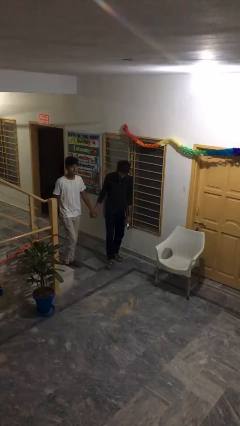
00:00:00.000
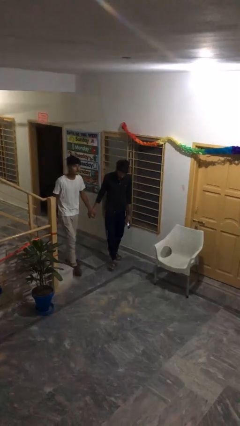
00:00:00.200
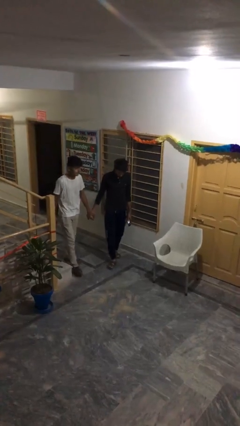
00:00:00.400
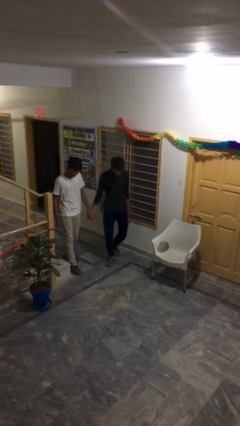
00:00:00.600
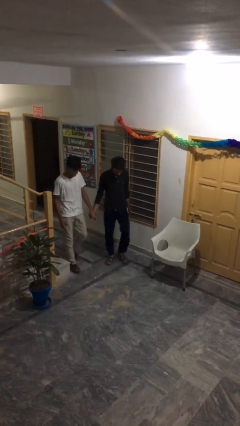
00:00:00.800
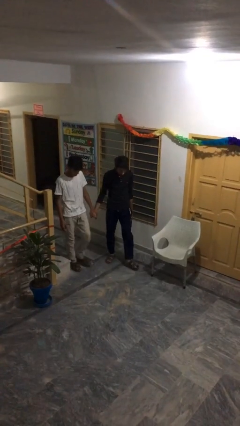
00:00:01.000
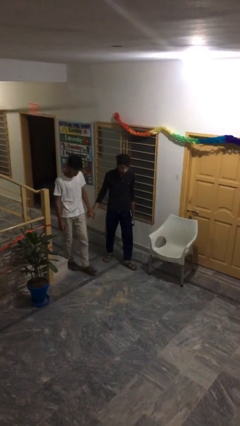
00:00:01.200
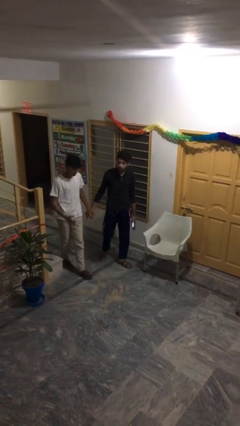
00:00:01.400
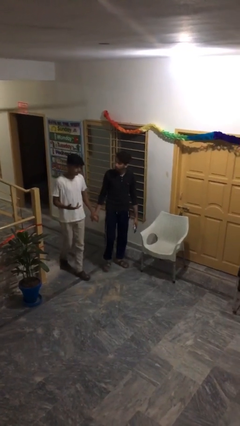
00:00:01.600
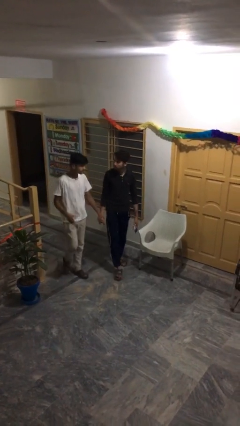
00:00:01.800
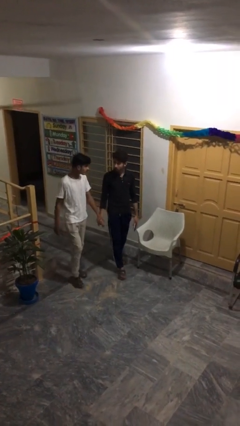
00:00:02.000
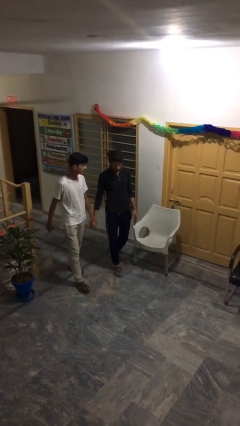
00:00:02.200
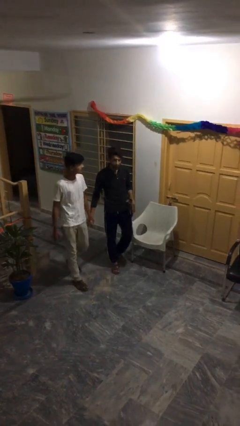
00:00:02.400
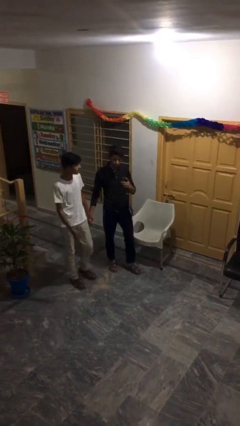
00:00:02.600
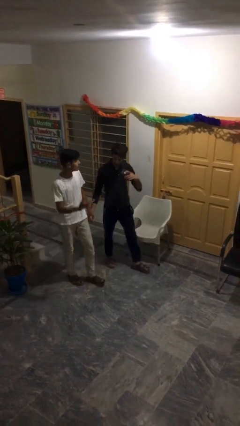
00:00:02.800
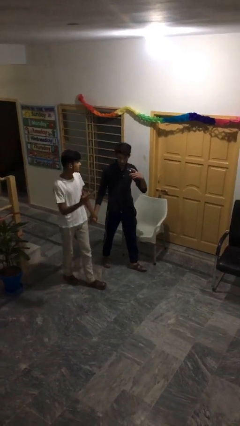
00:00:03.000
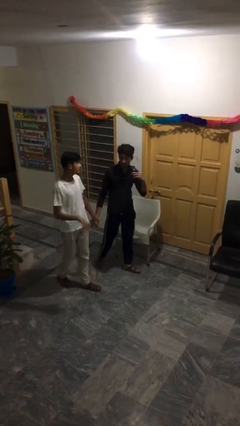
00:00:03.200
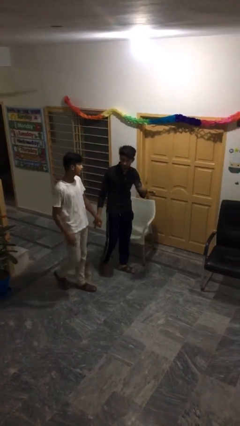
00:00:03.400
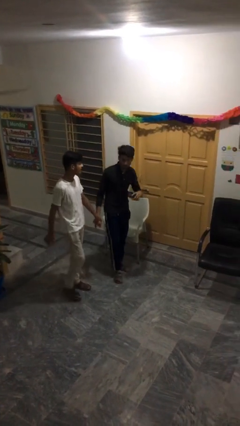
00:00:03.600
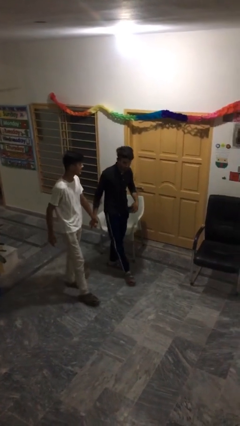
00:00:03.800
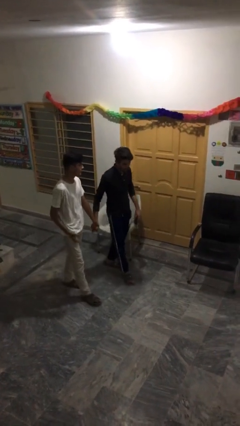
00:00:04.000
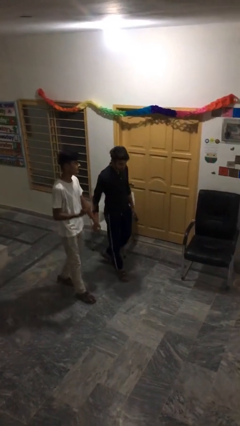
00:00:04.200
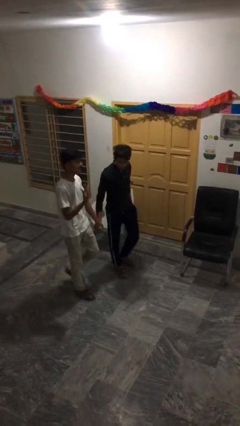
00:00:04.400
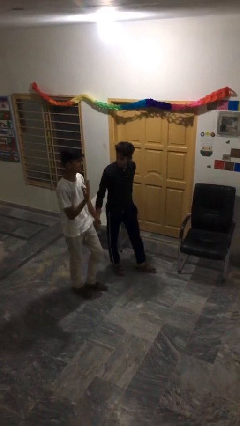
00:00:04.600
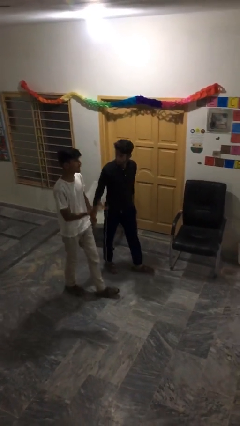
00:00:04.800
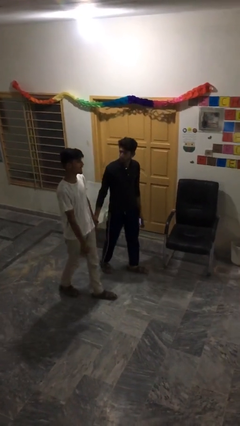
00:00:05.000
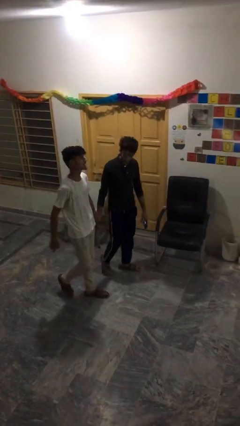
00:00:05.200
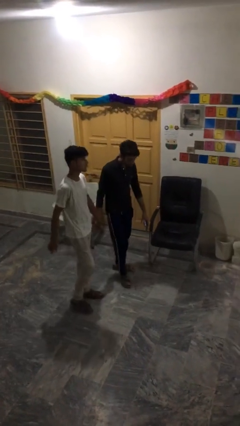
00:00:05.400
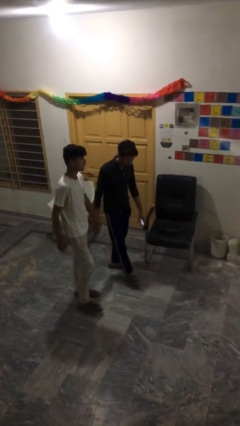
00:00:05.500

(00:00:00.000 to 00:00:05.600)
person holds hand

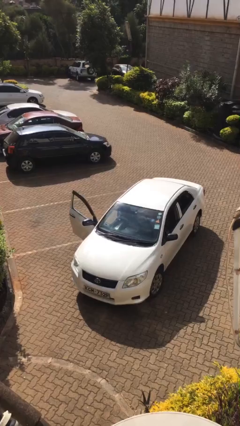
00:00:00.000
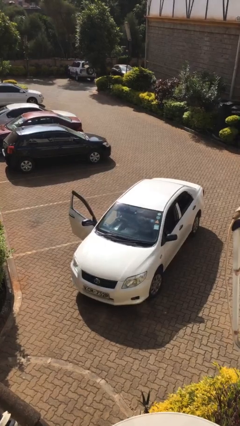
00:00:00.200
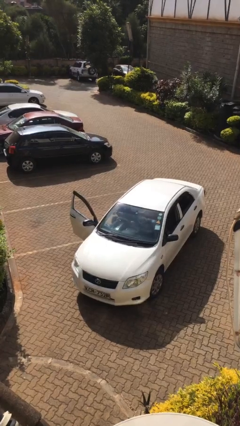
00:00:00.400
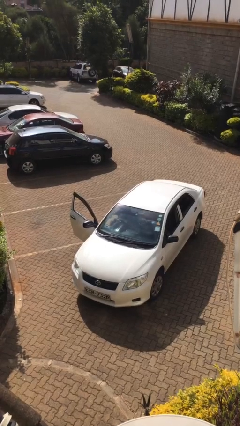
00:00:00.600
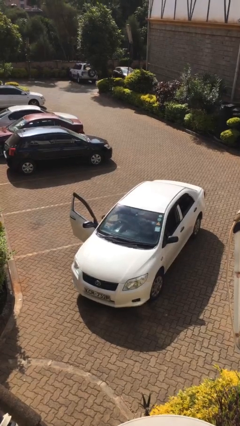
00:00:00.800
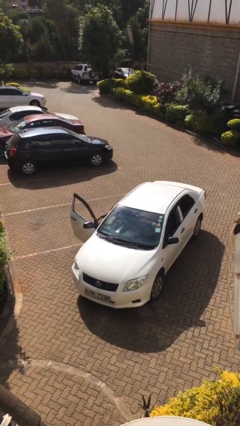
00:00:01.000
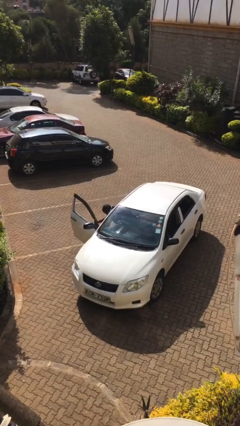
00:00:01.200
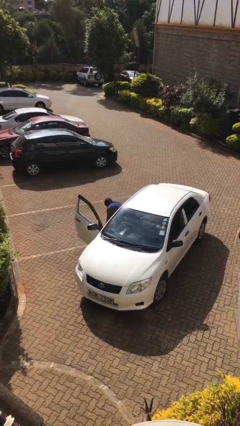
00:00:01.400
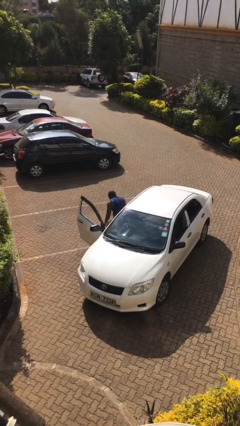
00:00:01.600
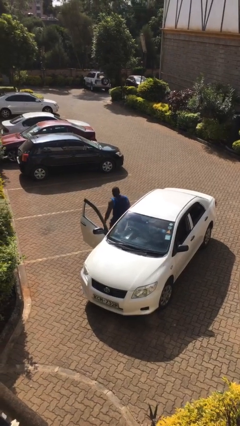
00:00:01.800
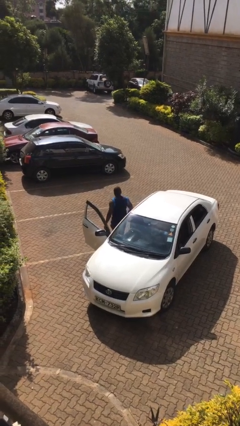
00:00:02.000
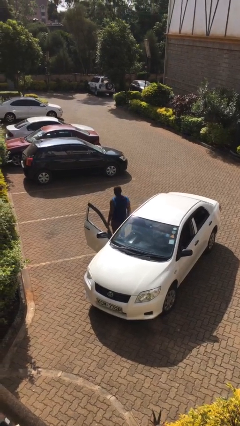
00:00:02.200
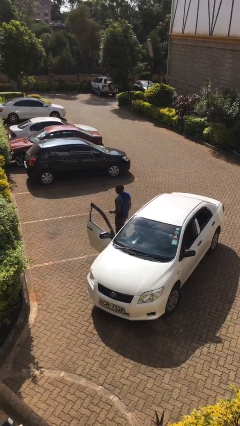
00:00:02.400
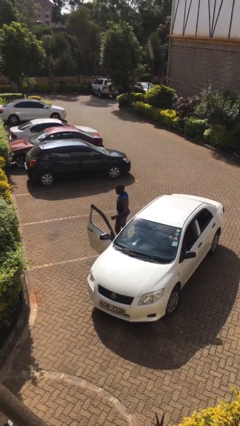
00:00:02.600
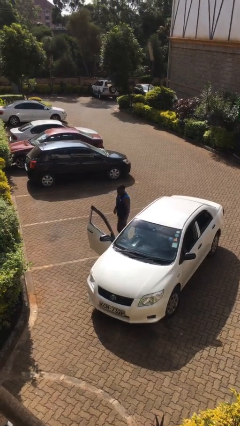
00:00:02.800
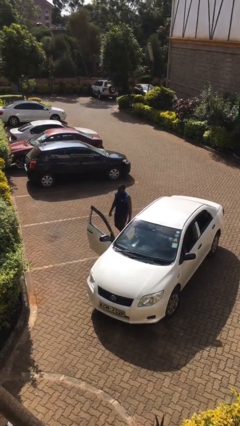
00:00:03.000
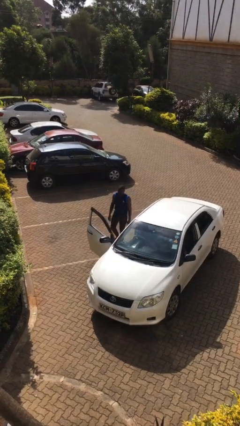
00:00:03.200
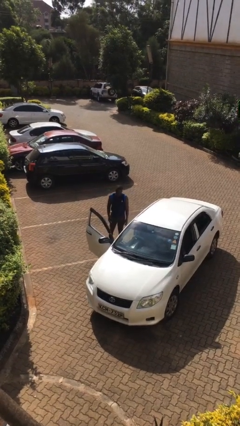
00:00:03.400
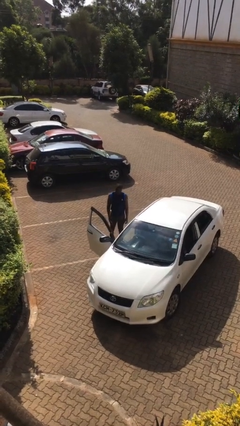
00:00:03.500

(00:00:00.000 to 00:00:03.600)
person exits car

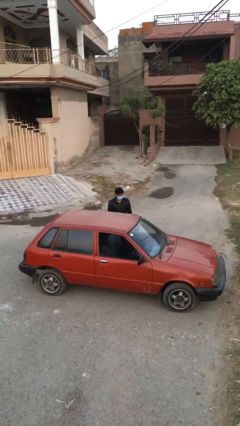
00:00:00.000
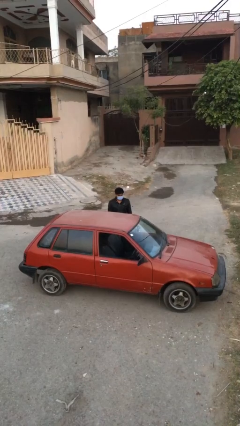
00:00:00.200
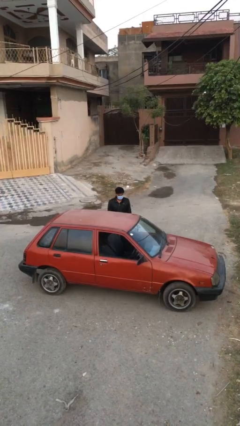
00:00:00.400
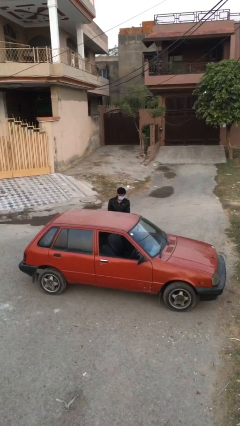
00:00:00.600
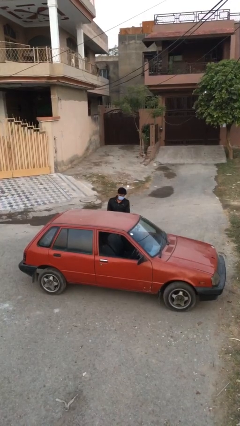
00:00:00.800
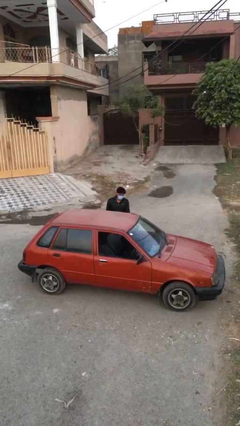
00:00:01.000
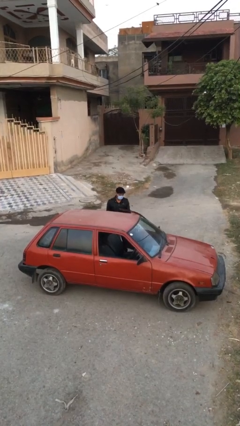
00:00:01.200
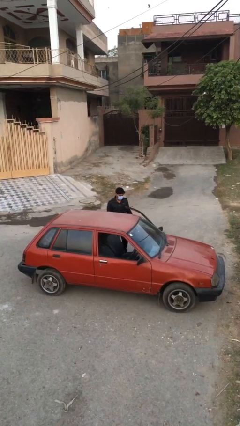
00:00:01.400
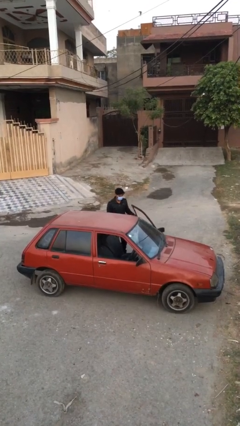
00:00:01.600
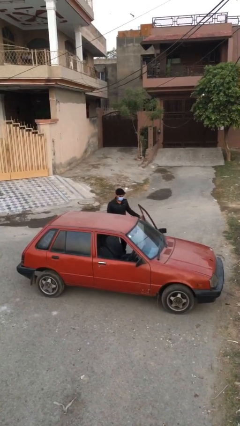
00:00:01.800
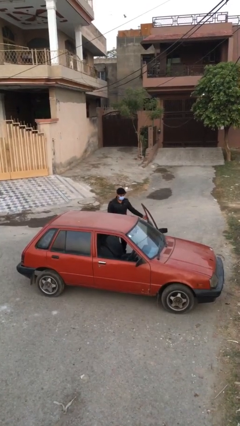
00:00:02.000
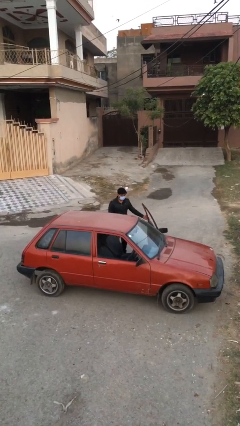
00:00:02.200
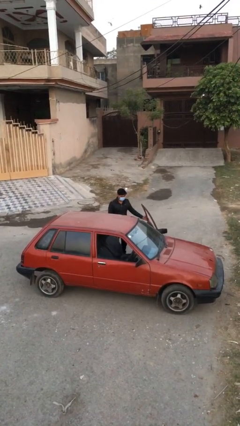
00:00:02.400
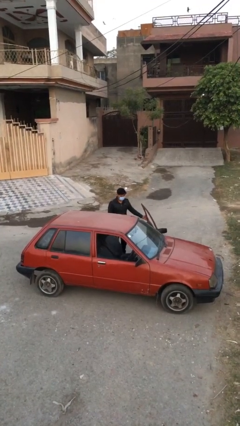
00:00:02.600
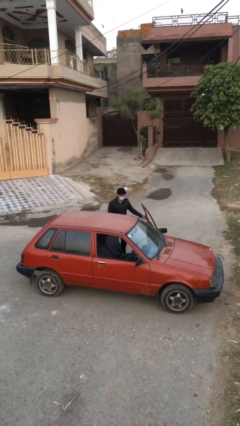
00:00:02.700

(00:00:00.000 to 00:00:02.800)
person opens car door

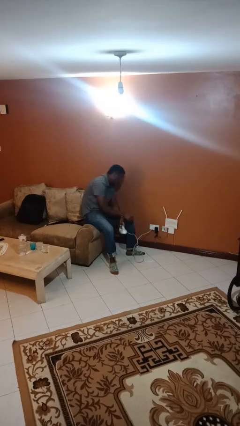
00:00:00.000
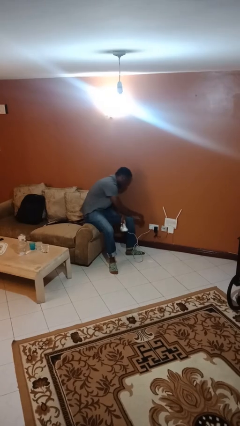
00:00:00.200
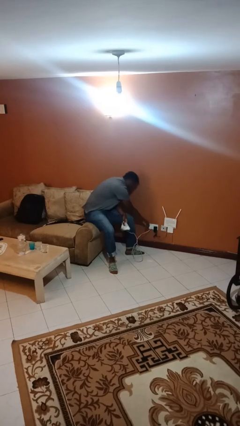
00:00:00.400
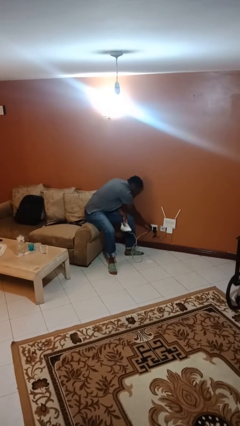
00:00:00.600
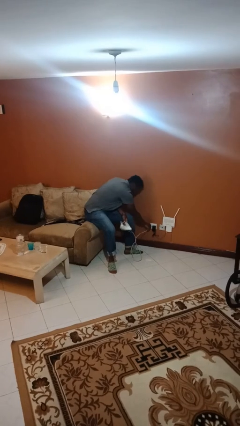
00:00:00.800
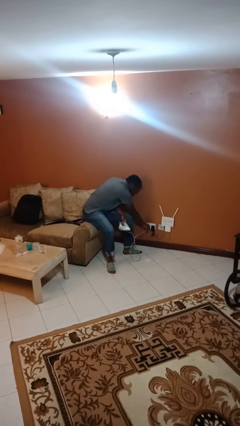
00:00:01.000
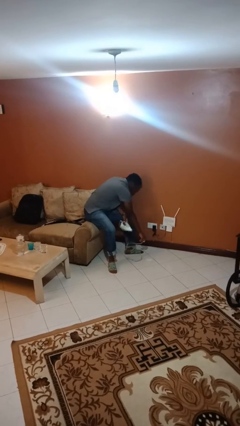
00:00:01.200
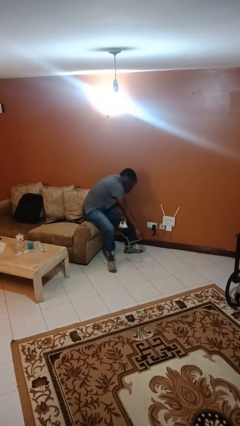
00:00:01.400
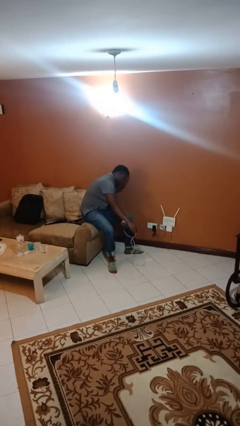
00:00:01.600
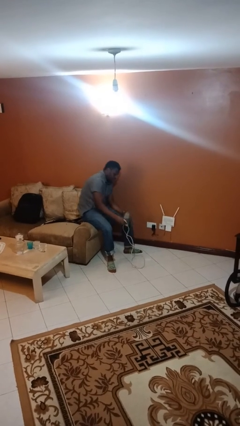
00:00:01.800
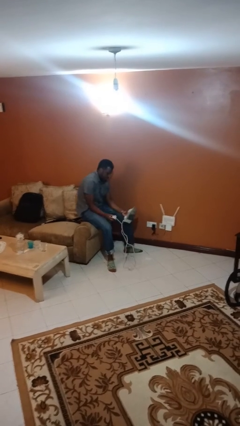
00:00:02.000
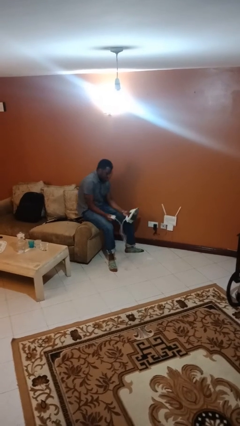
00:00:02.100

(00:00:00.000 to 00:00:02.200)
person unplugs from electrical socket

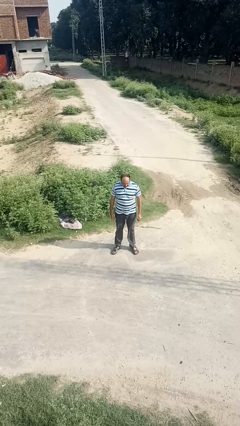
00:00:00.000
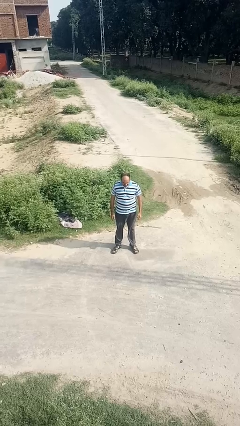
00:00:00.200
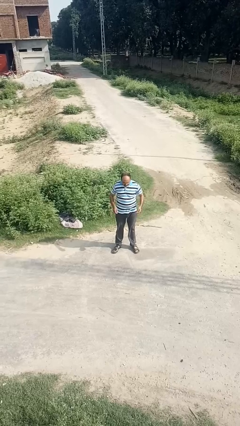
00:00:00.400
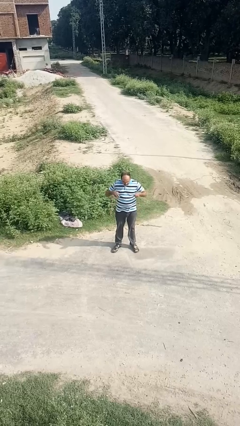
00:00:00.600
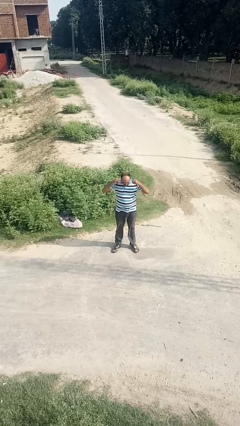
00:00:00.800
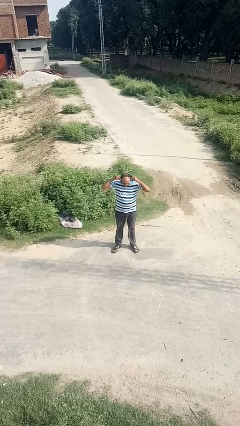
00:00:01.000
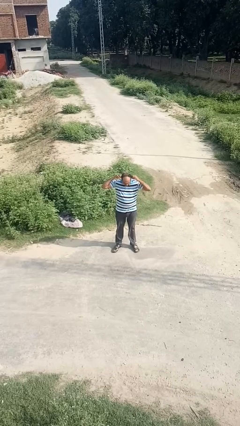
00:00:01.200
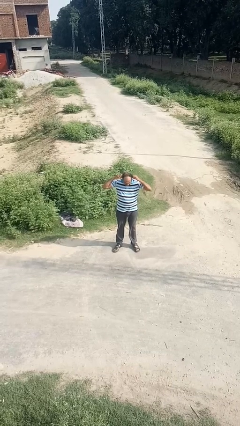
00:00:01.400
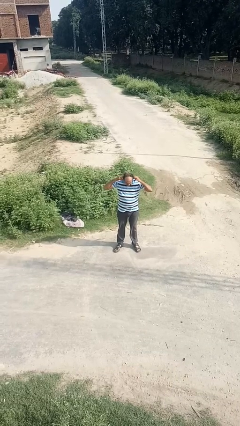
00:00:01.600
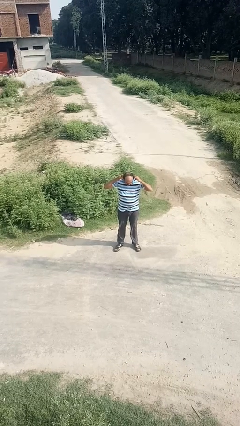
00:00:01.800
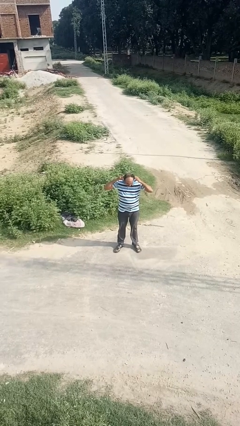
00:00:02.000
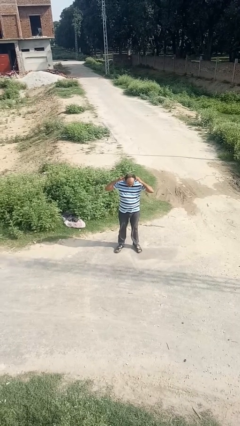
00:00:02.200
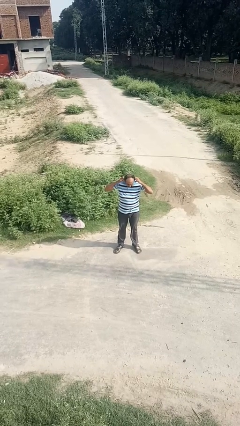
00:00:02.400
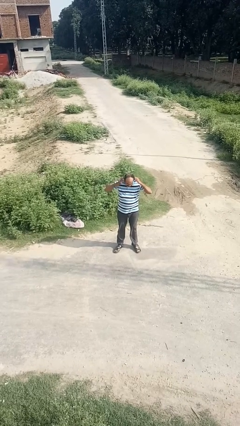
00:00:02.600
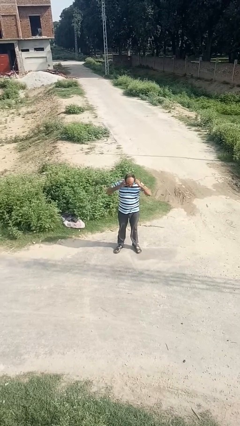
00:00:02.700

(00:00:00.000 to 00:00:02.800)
person puts on earrings

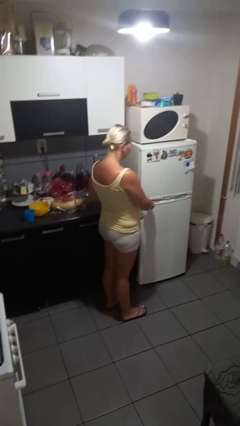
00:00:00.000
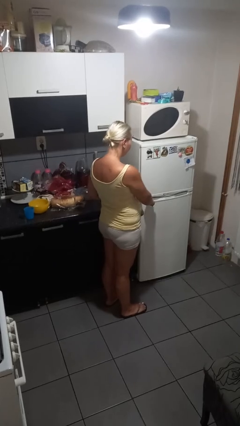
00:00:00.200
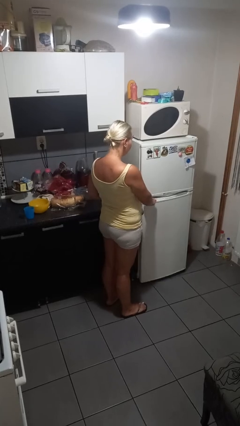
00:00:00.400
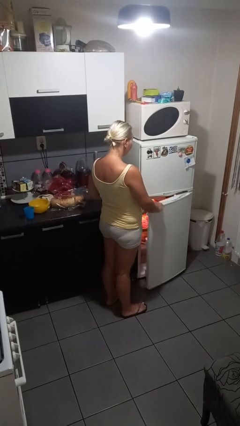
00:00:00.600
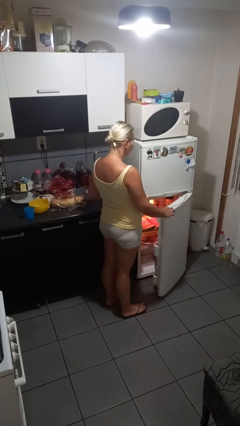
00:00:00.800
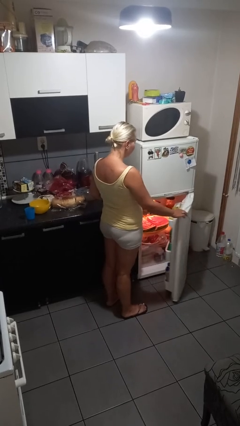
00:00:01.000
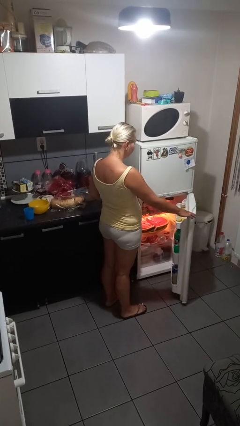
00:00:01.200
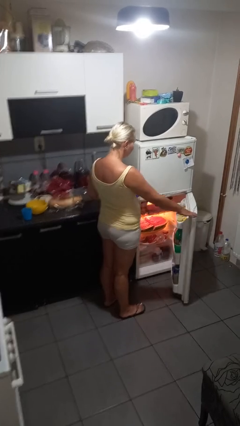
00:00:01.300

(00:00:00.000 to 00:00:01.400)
person opens refrigerator
